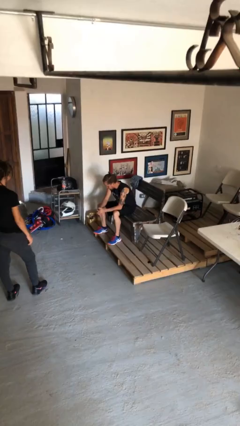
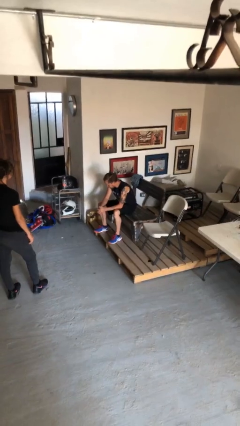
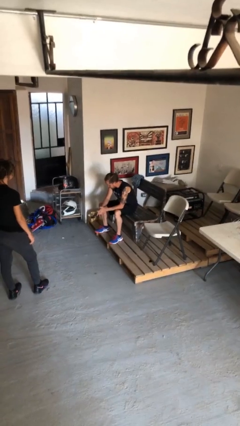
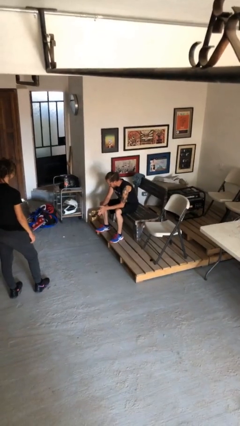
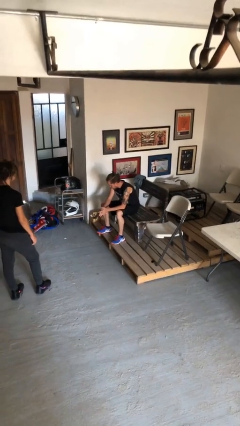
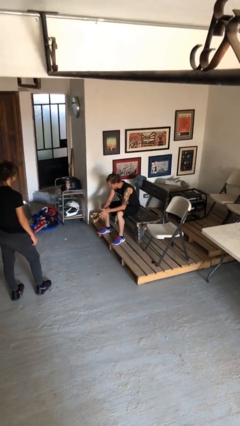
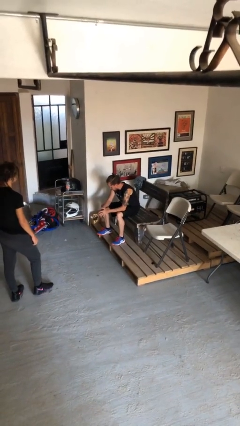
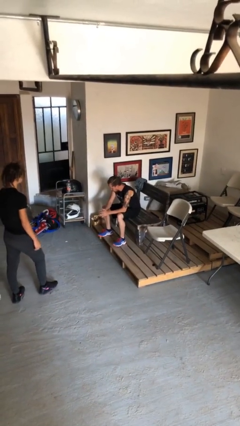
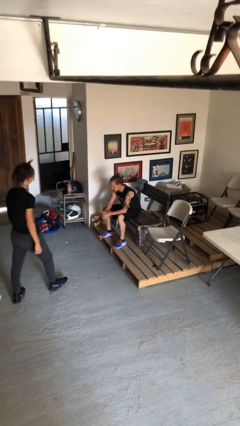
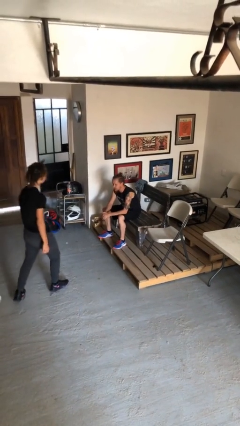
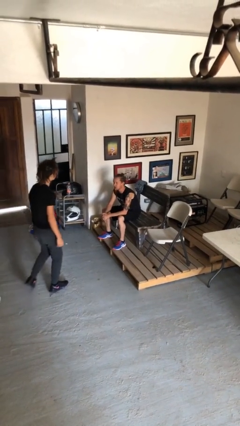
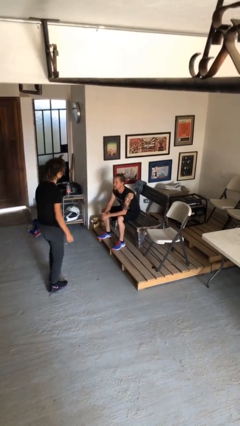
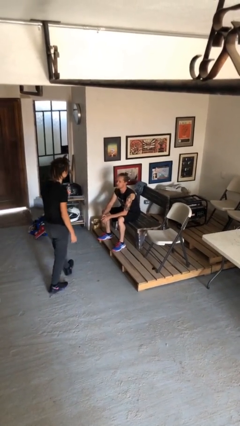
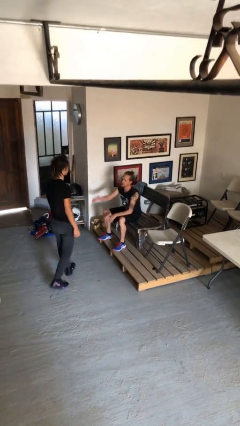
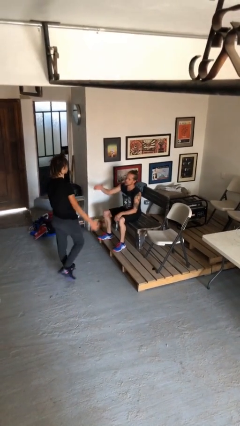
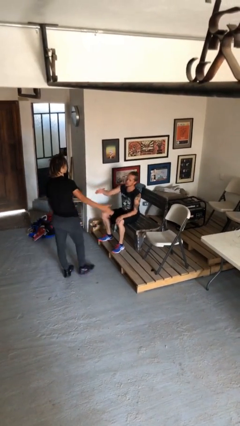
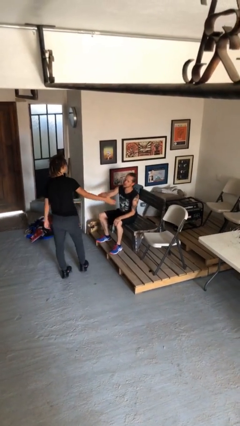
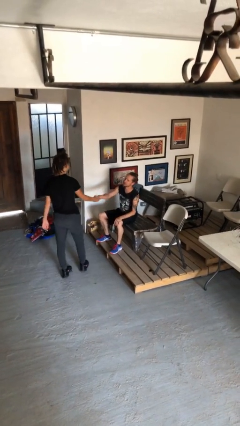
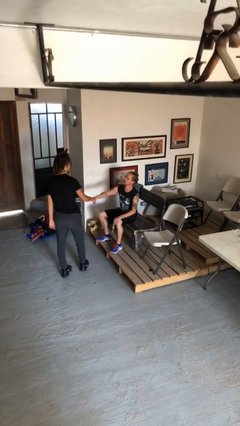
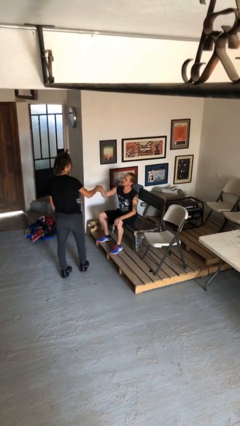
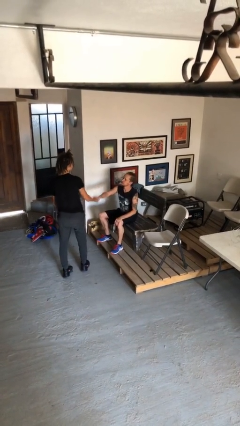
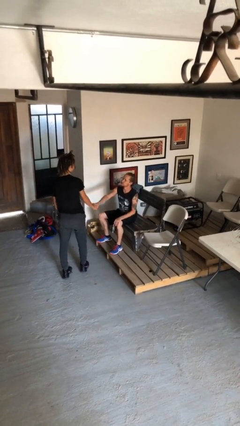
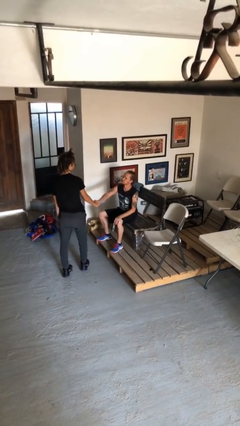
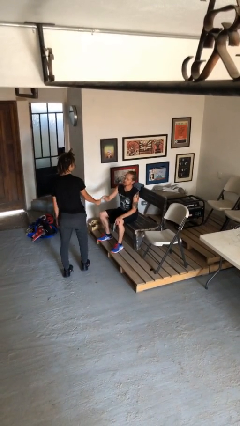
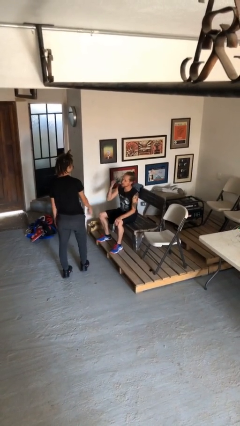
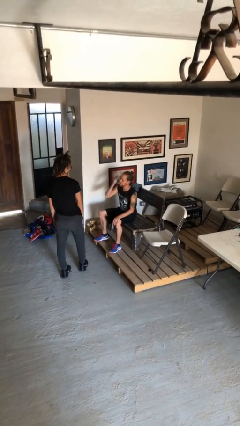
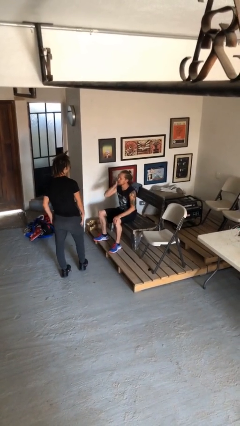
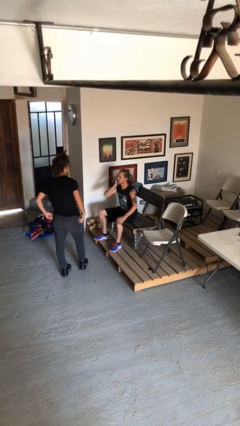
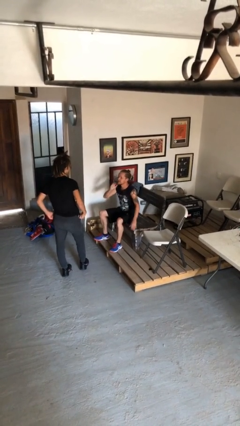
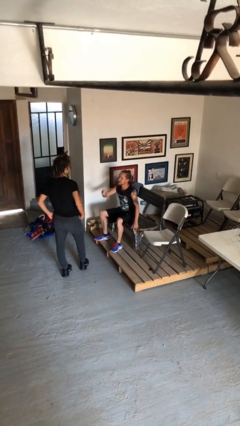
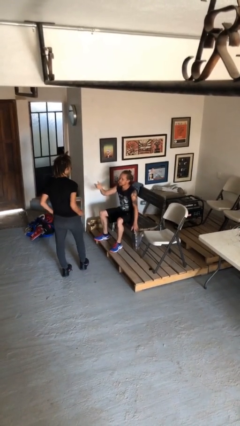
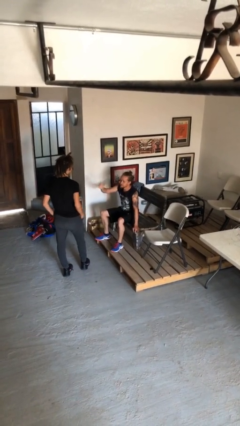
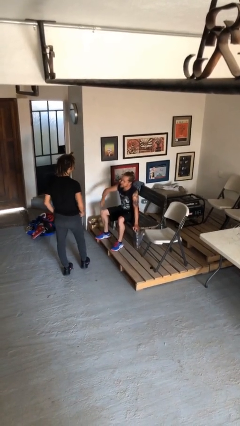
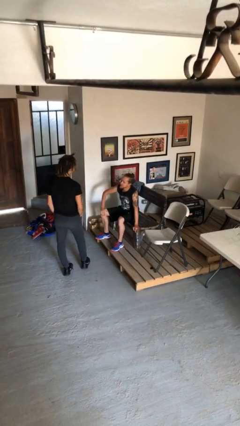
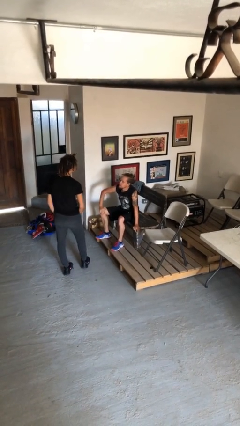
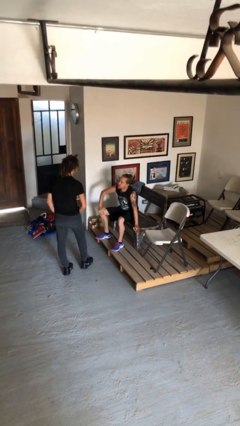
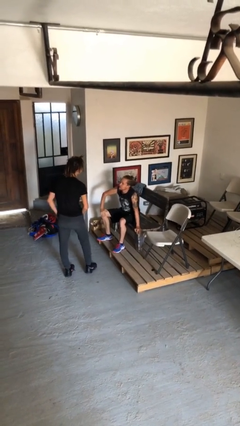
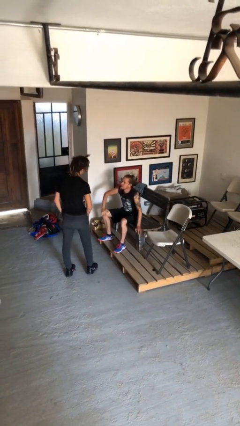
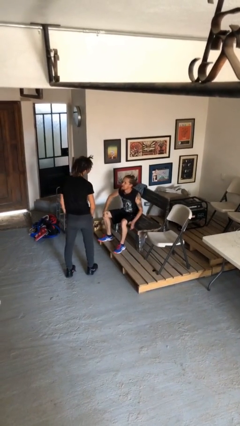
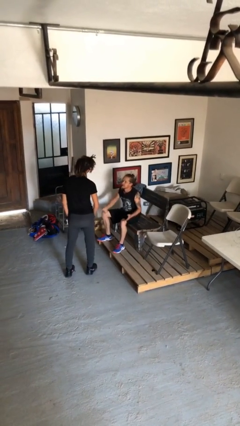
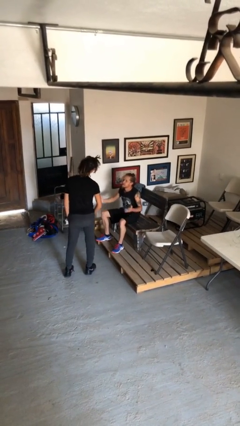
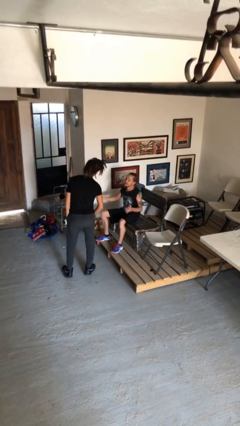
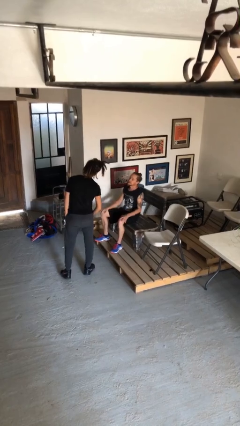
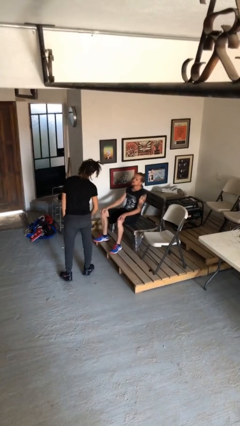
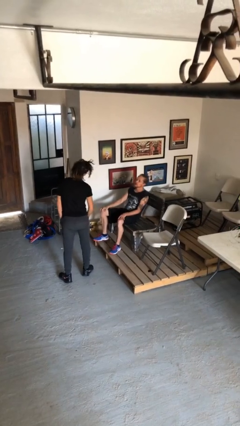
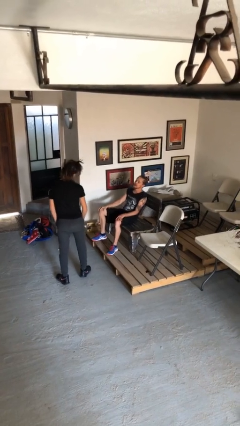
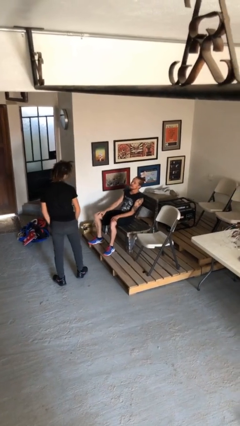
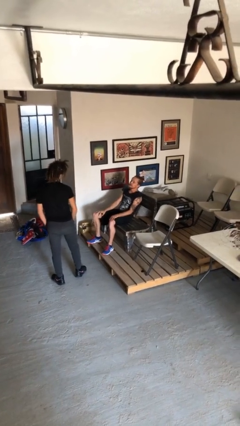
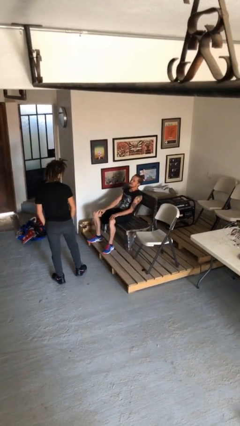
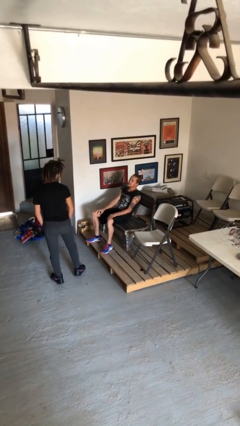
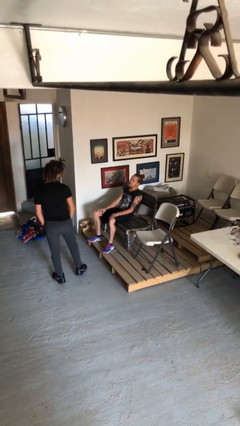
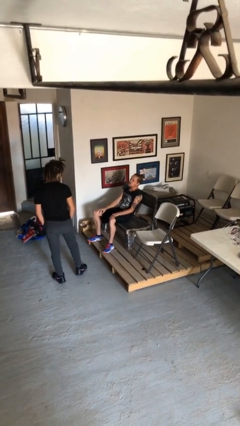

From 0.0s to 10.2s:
person shakes hand

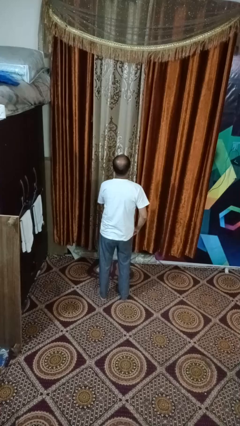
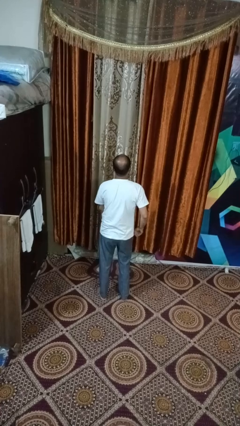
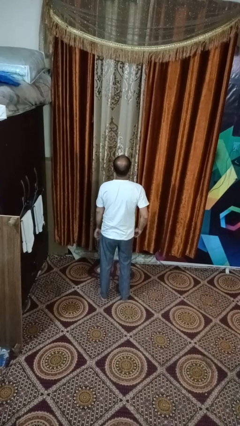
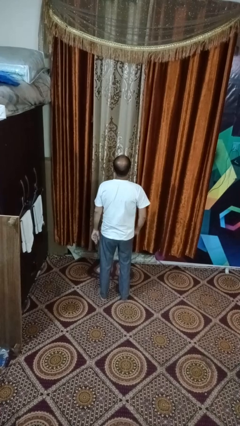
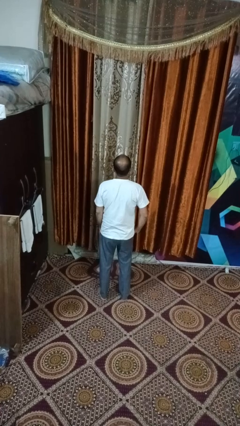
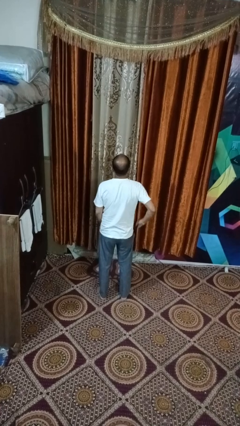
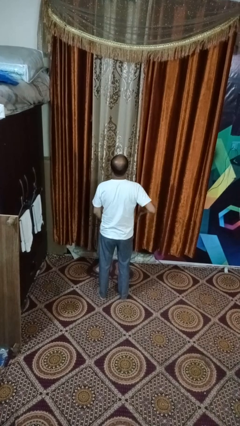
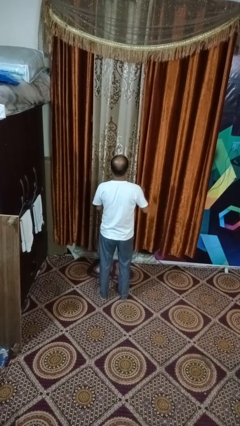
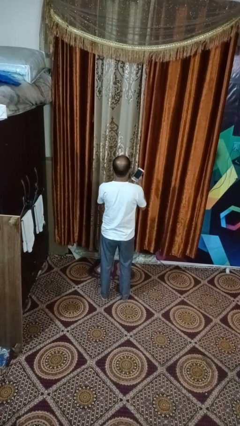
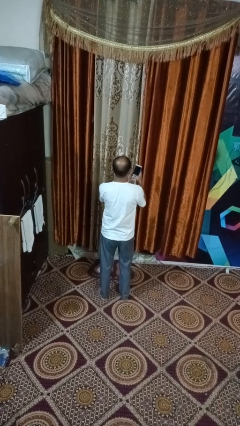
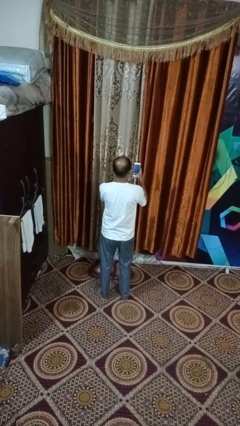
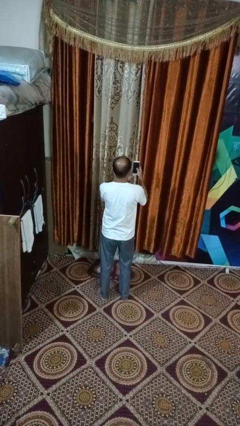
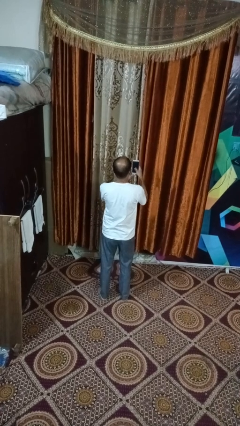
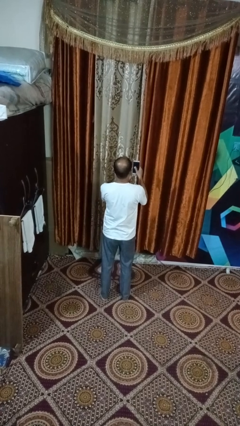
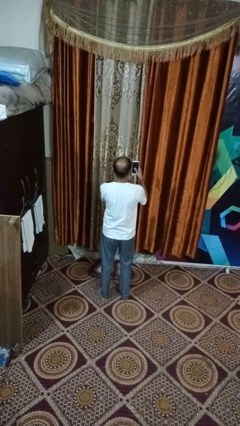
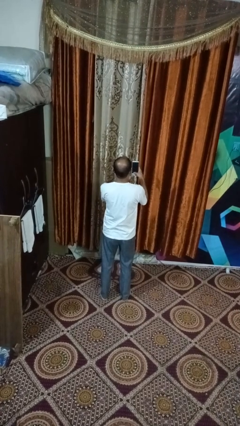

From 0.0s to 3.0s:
person takes phone from pocket

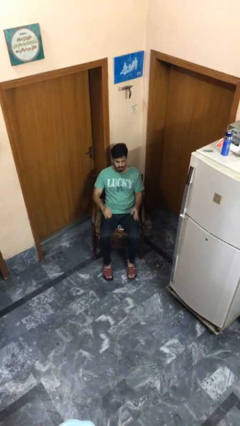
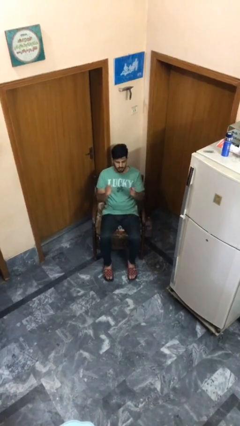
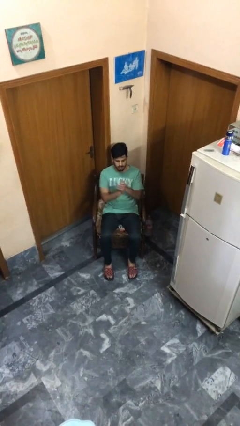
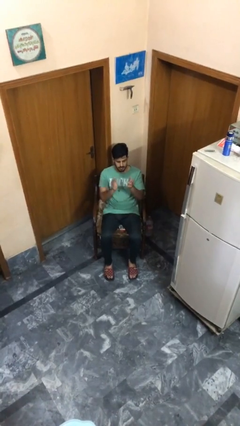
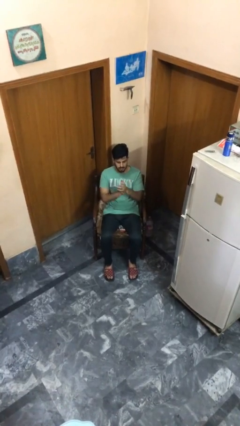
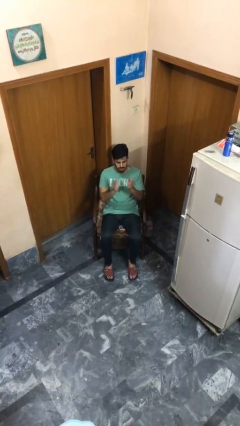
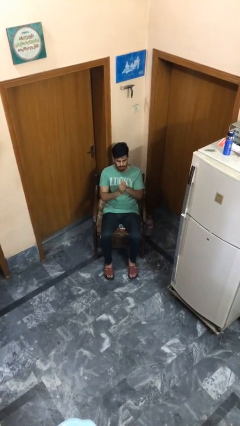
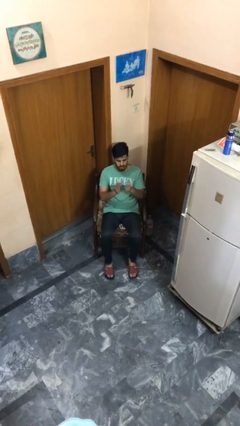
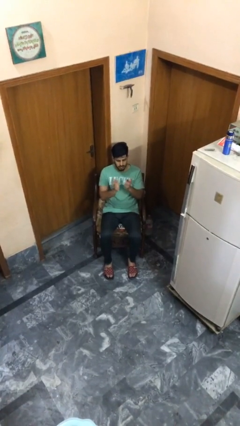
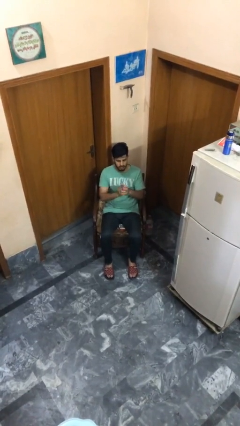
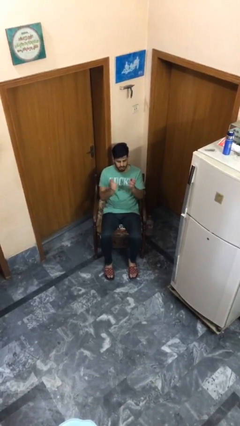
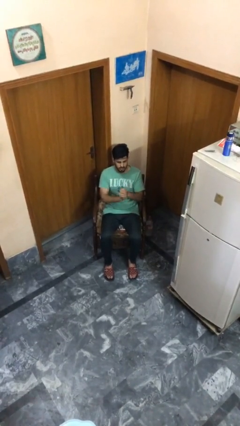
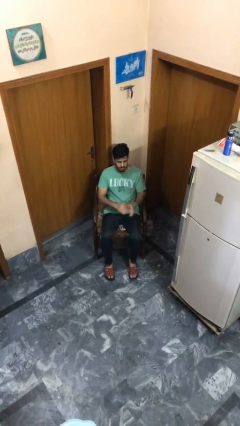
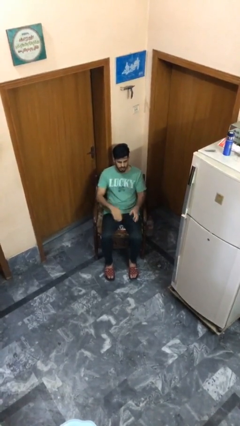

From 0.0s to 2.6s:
person claps hands

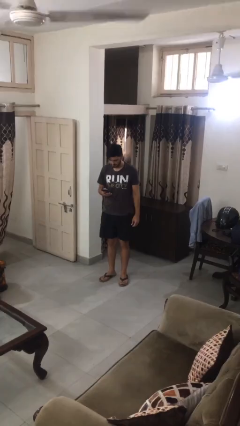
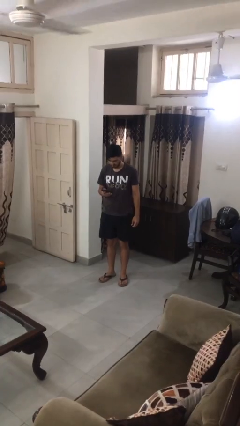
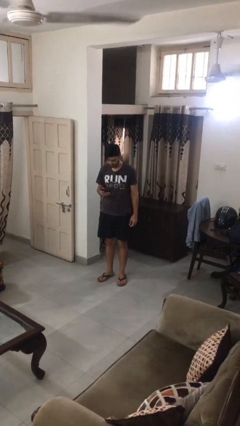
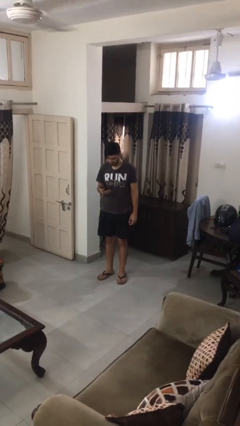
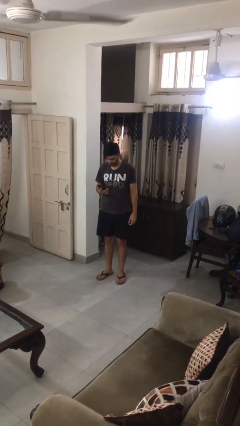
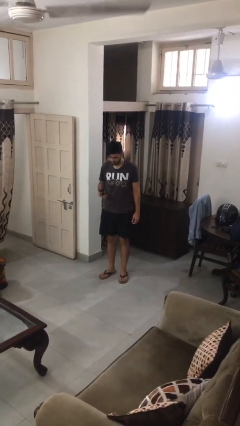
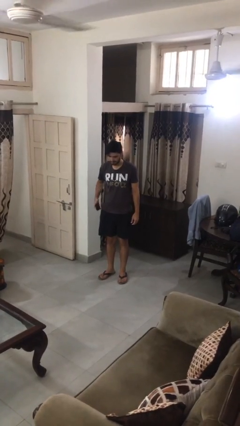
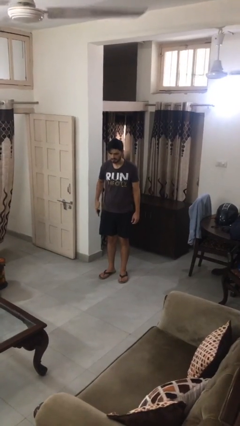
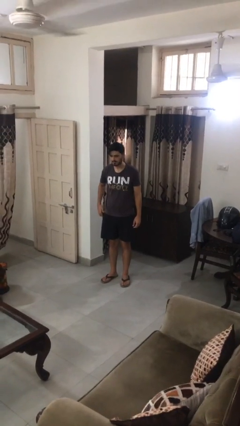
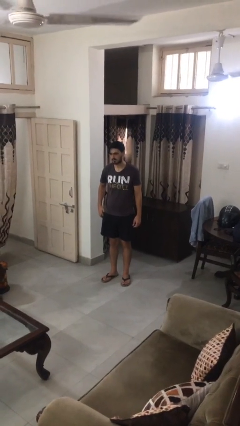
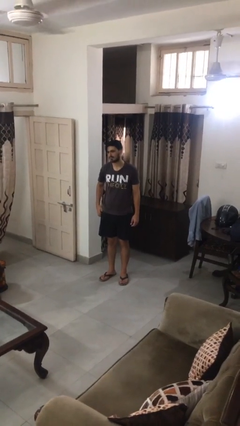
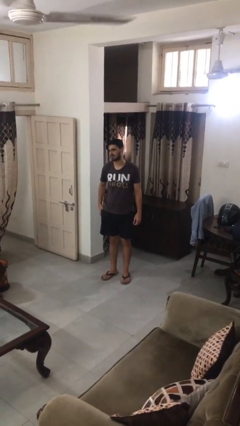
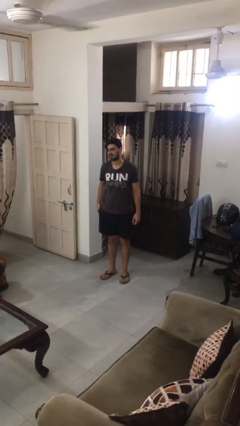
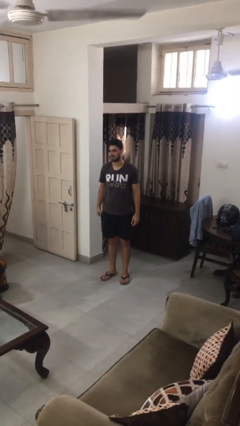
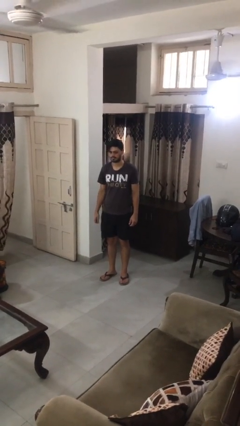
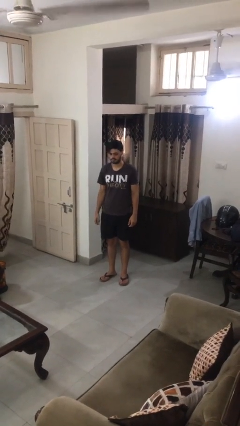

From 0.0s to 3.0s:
person puts phone into pocket
